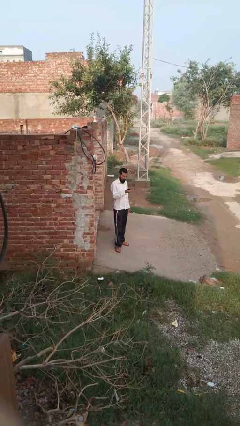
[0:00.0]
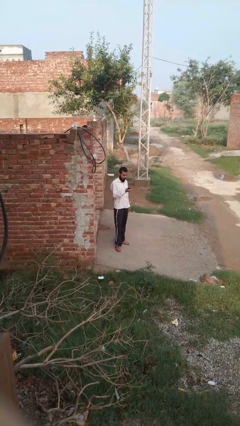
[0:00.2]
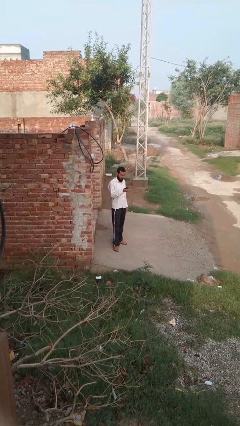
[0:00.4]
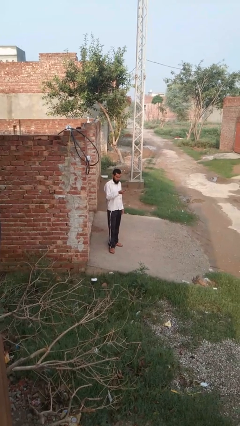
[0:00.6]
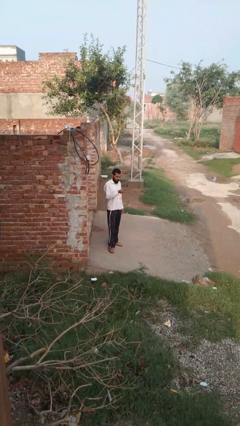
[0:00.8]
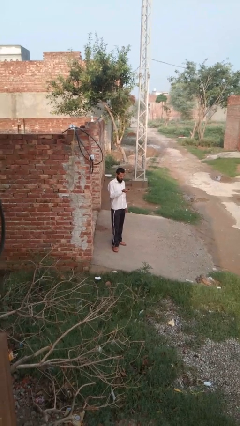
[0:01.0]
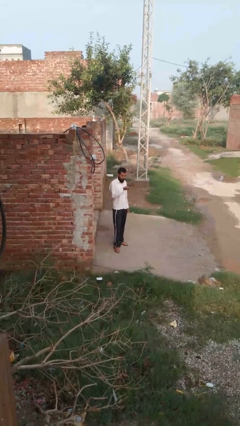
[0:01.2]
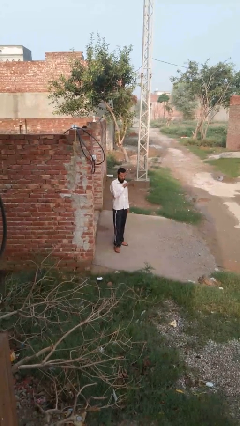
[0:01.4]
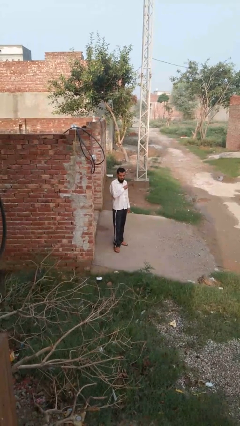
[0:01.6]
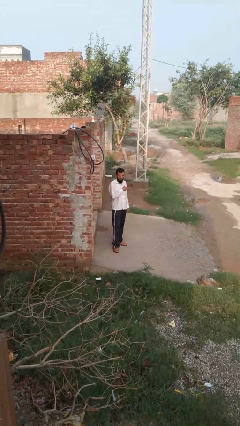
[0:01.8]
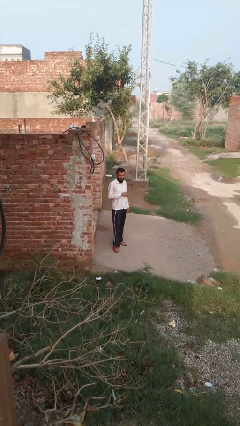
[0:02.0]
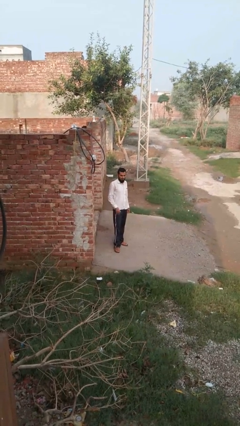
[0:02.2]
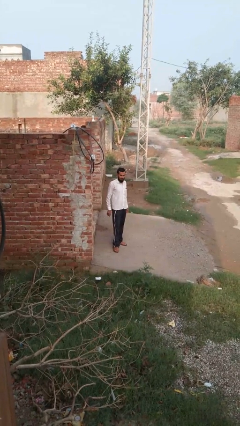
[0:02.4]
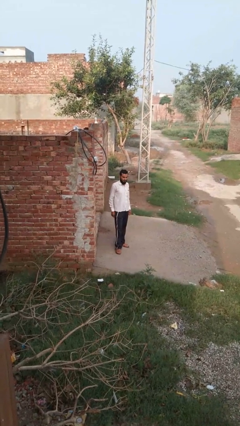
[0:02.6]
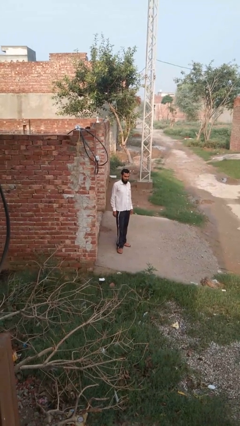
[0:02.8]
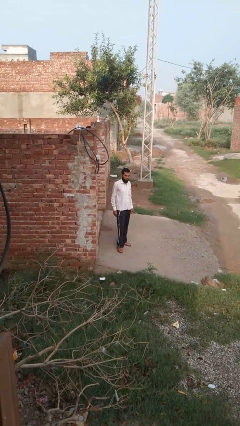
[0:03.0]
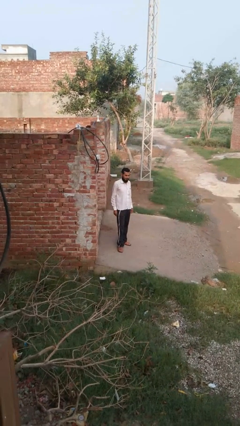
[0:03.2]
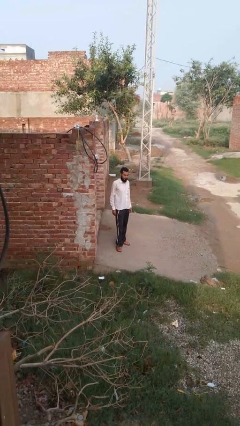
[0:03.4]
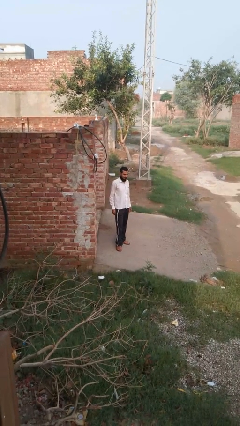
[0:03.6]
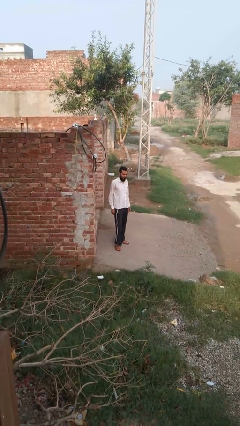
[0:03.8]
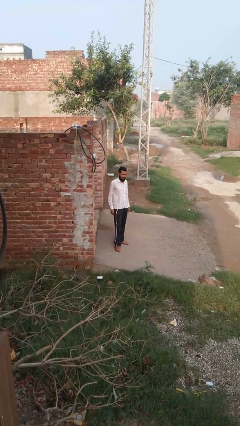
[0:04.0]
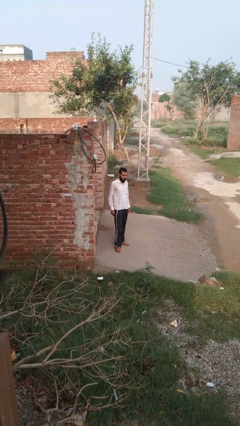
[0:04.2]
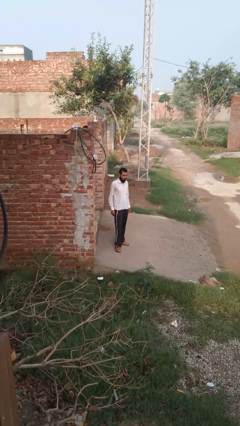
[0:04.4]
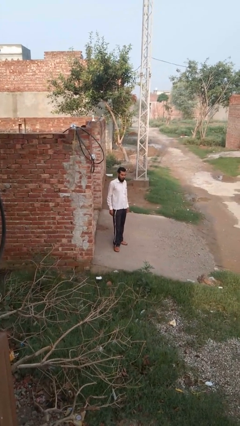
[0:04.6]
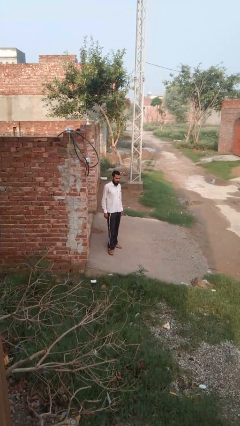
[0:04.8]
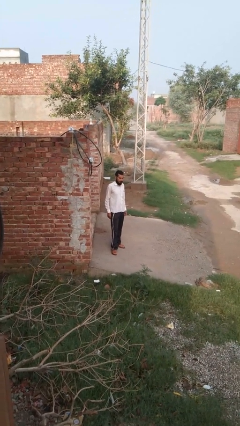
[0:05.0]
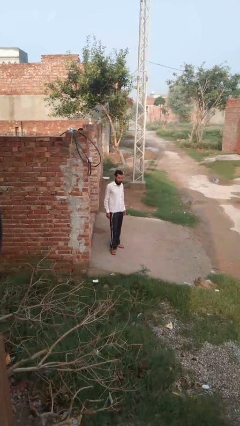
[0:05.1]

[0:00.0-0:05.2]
person puts phone into pocket

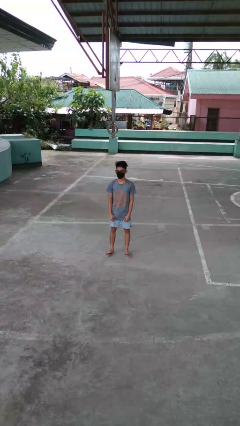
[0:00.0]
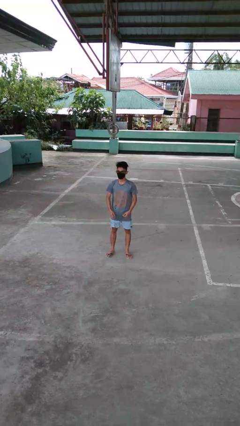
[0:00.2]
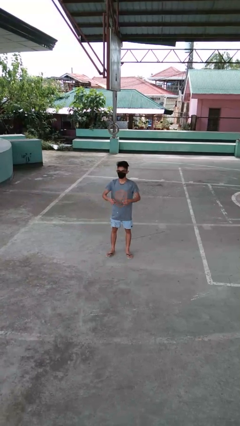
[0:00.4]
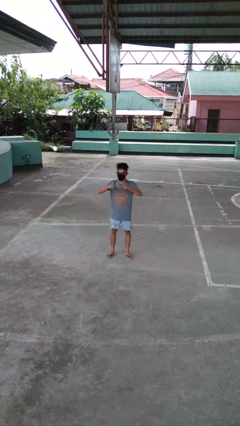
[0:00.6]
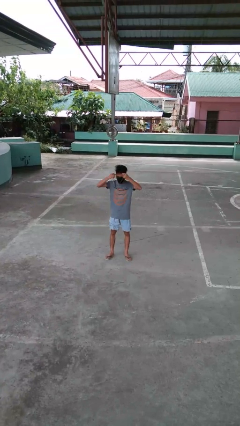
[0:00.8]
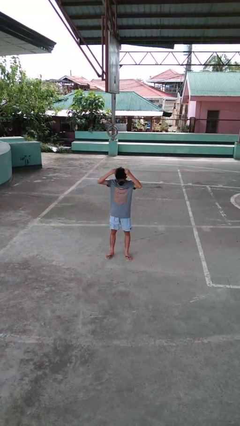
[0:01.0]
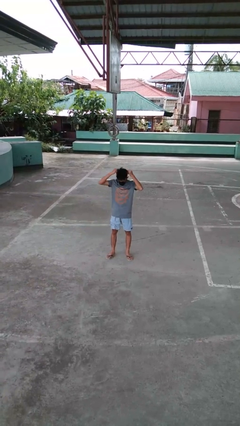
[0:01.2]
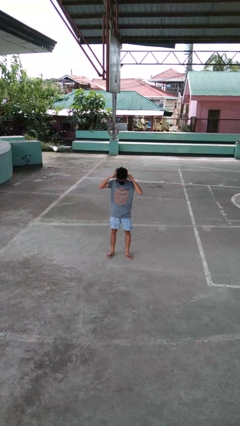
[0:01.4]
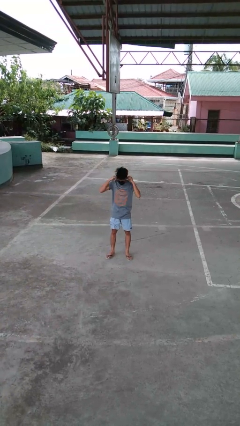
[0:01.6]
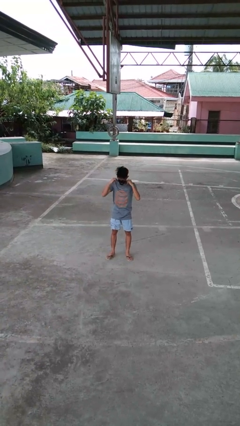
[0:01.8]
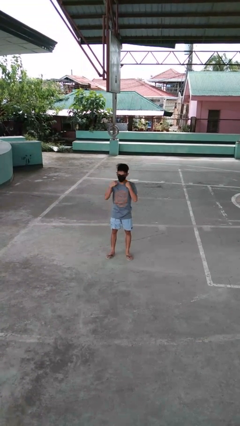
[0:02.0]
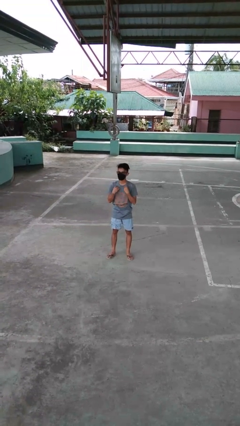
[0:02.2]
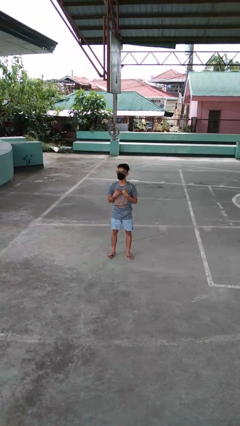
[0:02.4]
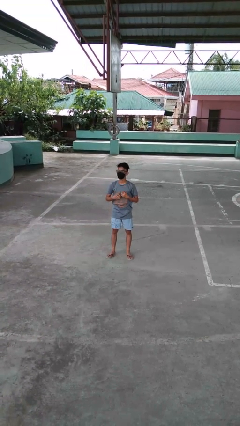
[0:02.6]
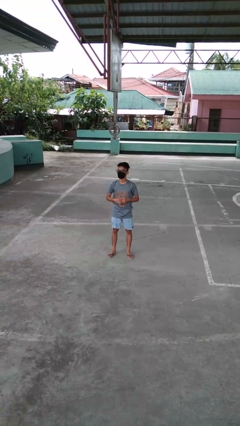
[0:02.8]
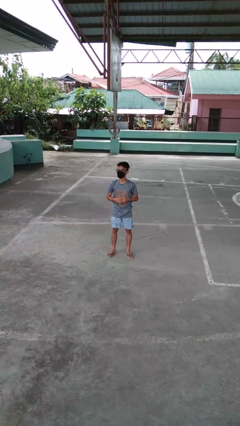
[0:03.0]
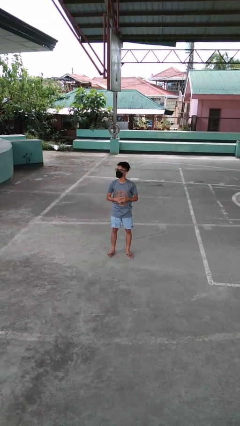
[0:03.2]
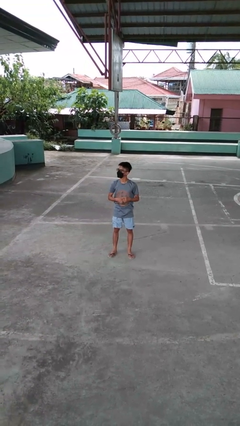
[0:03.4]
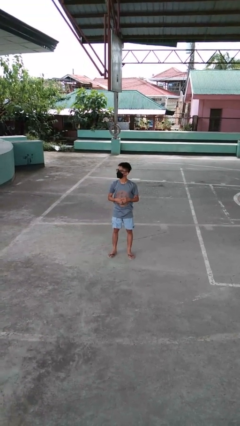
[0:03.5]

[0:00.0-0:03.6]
person puts on necklace

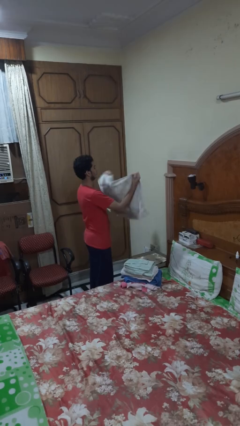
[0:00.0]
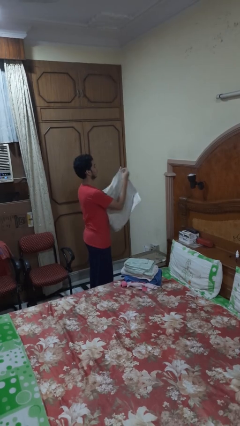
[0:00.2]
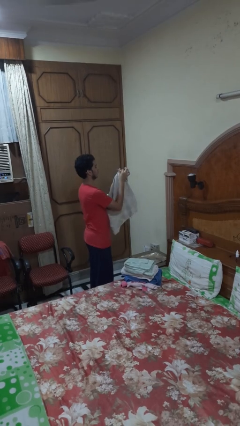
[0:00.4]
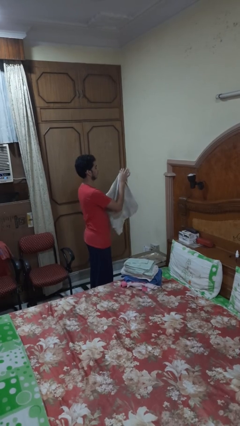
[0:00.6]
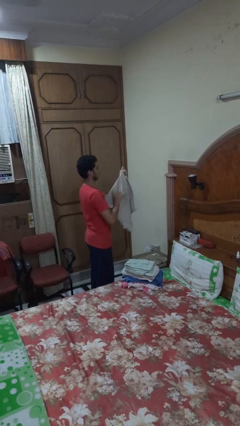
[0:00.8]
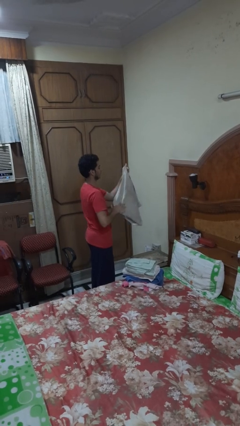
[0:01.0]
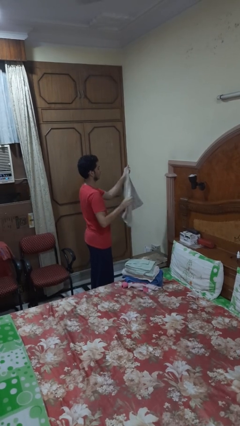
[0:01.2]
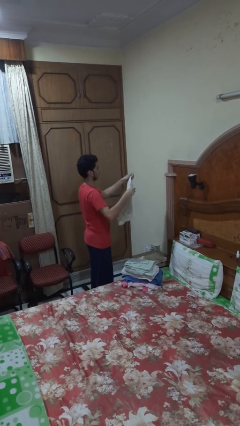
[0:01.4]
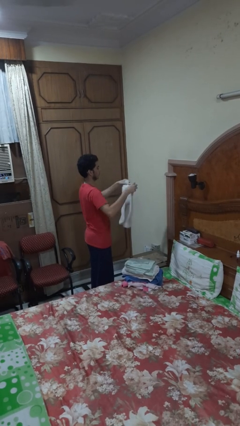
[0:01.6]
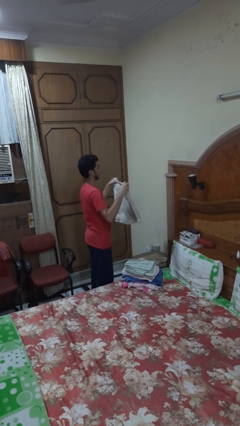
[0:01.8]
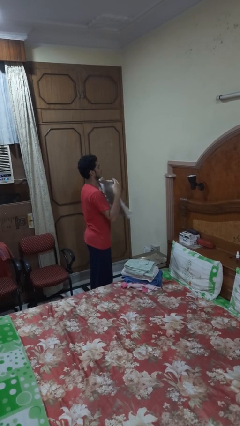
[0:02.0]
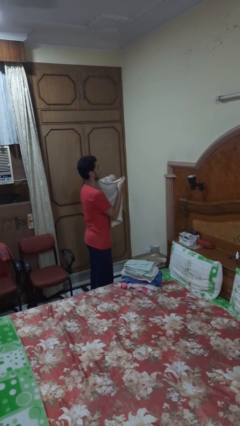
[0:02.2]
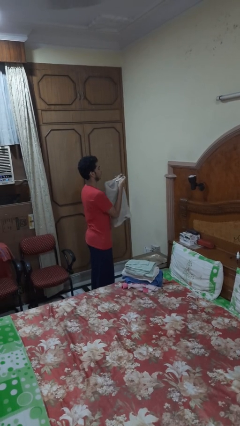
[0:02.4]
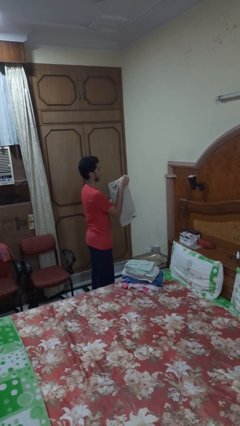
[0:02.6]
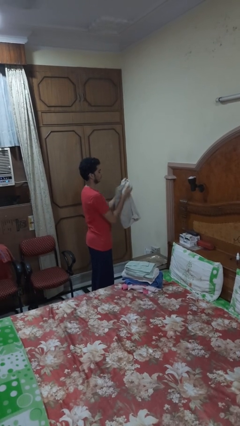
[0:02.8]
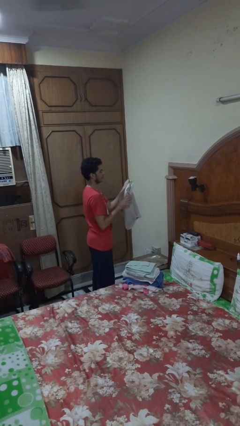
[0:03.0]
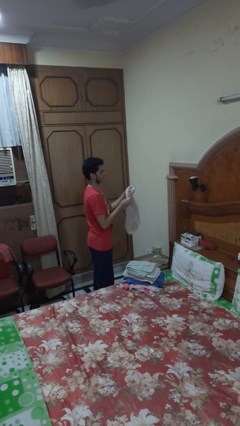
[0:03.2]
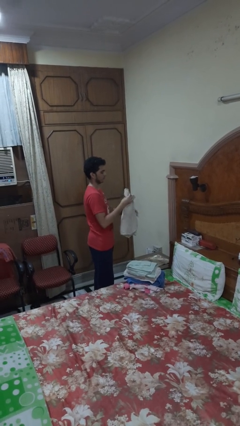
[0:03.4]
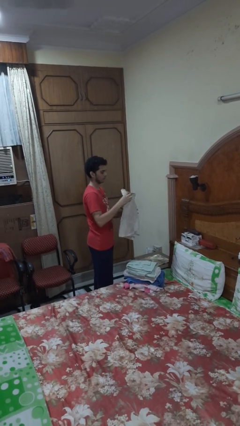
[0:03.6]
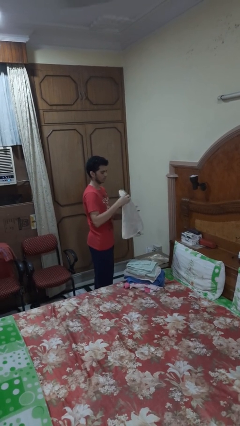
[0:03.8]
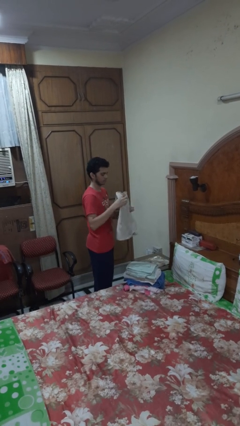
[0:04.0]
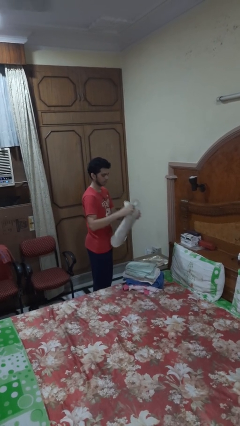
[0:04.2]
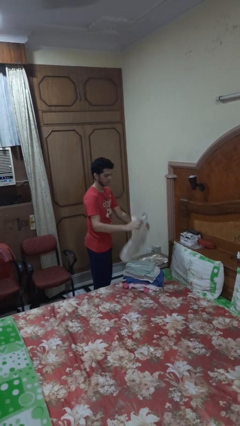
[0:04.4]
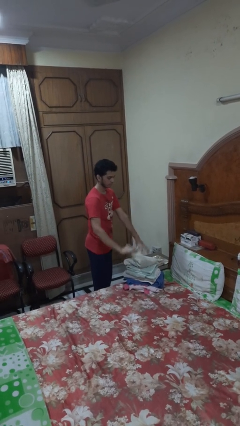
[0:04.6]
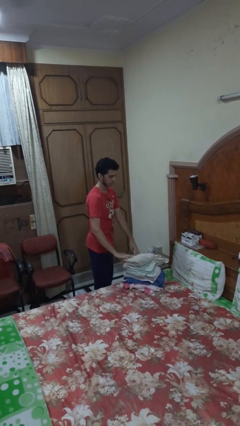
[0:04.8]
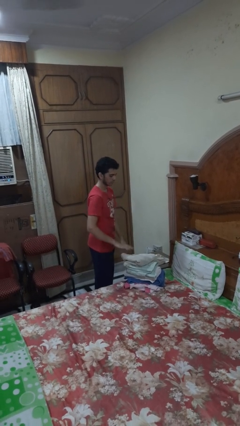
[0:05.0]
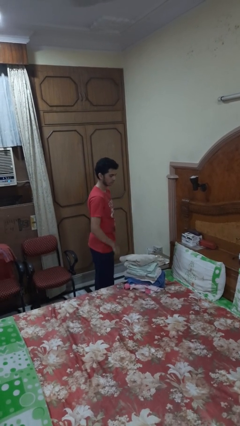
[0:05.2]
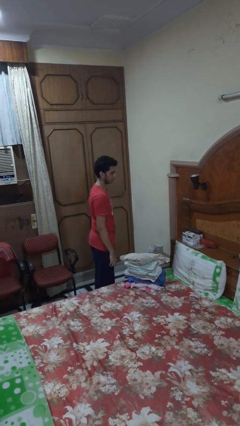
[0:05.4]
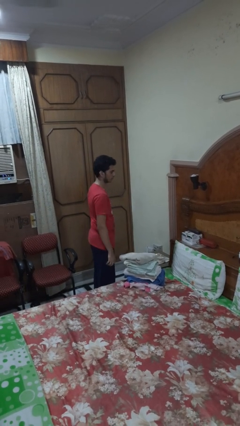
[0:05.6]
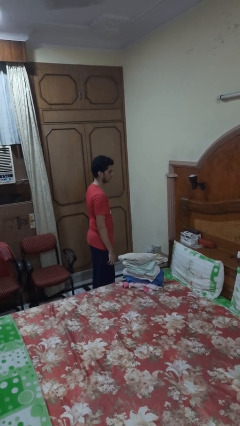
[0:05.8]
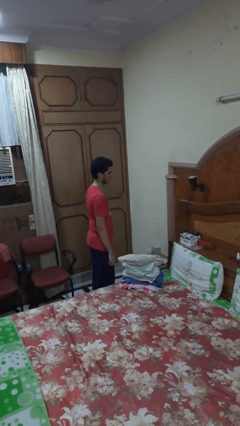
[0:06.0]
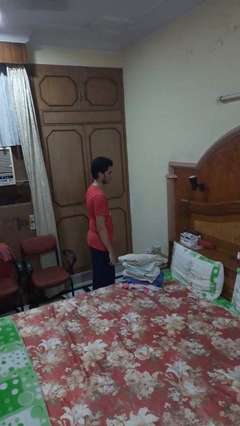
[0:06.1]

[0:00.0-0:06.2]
person folds towel

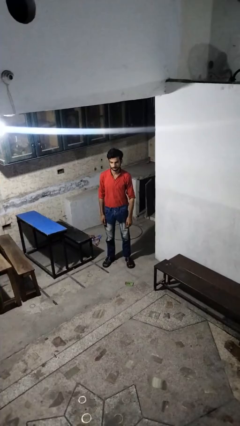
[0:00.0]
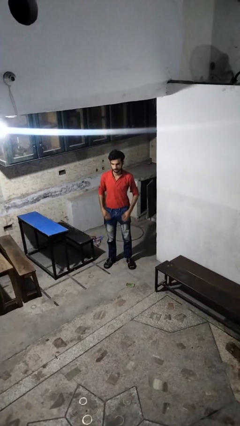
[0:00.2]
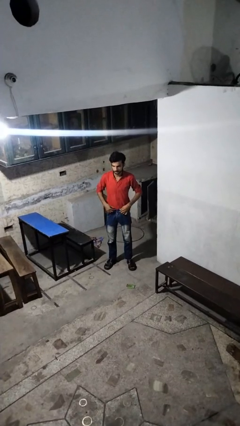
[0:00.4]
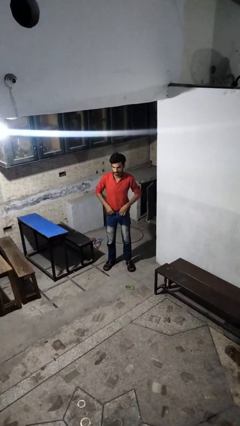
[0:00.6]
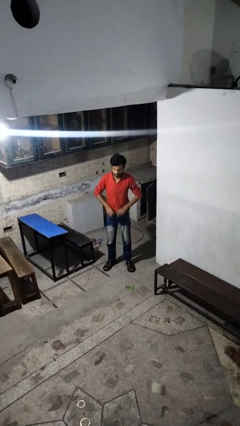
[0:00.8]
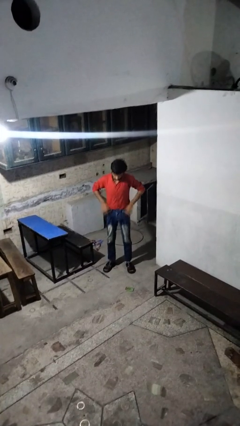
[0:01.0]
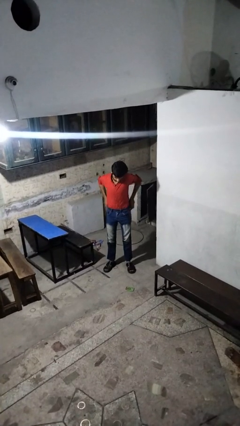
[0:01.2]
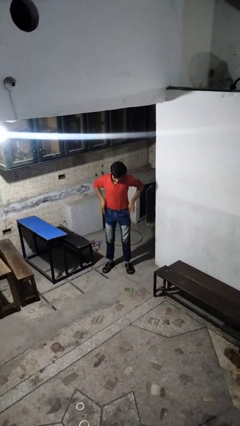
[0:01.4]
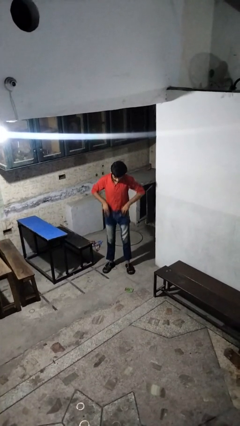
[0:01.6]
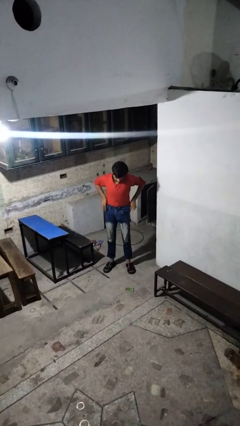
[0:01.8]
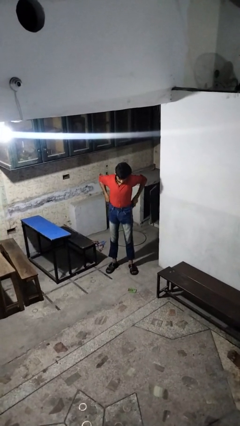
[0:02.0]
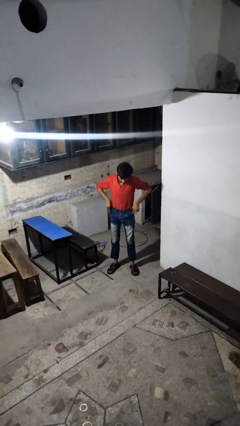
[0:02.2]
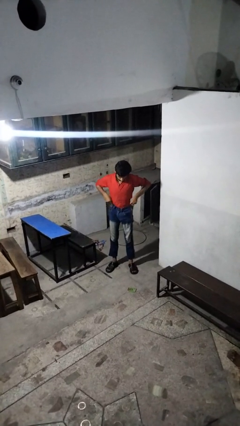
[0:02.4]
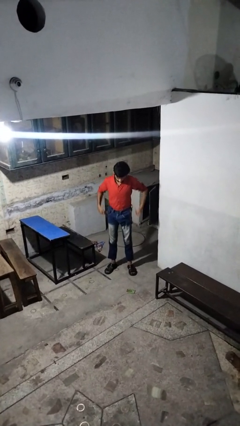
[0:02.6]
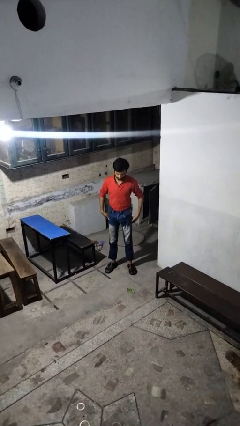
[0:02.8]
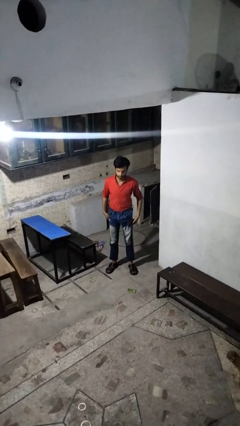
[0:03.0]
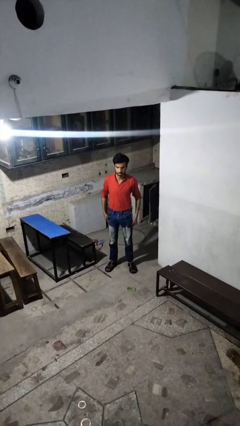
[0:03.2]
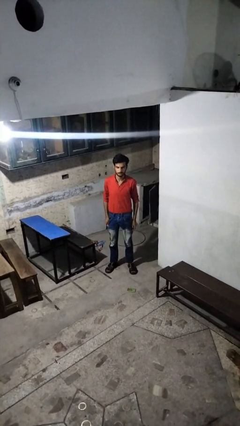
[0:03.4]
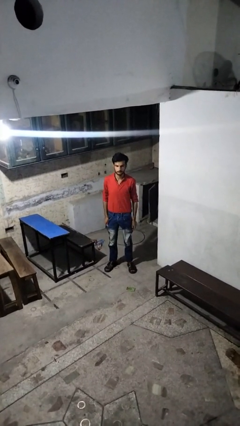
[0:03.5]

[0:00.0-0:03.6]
person hikes up pants
